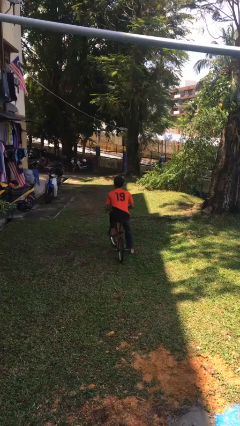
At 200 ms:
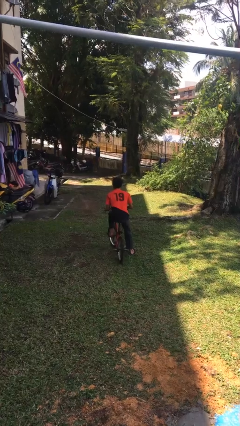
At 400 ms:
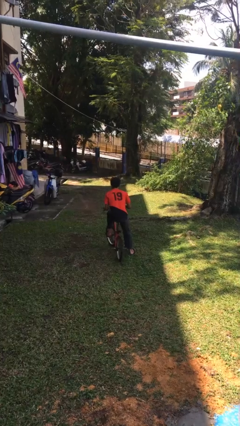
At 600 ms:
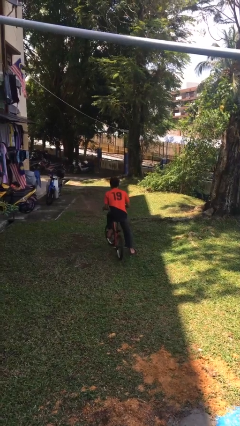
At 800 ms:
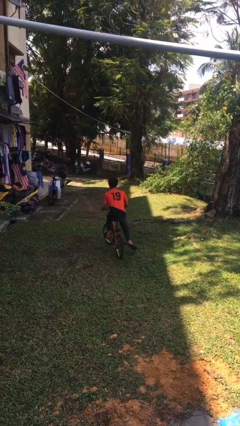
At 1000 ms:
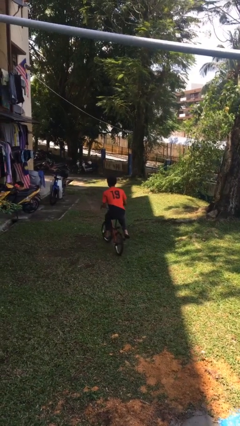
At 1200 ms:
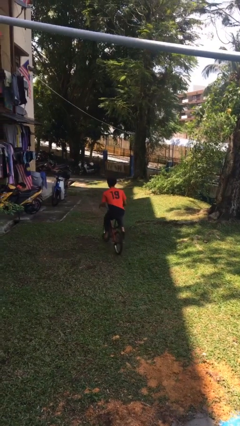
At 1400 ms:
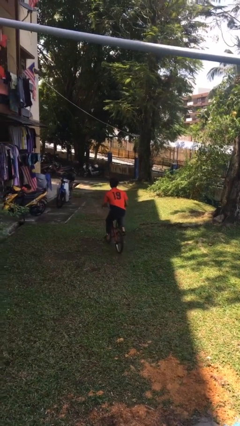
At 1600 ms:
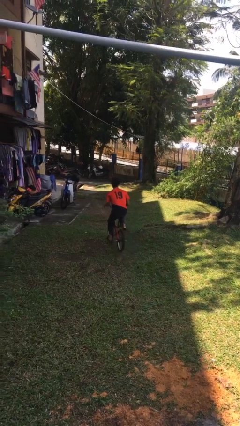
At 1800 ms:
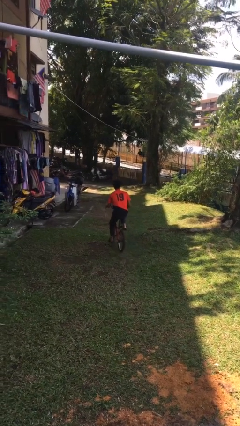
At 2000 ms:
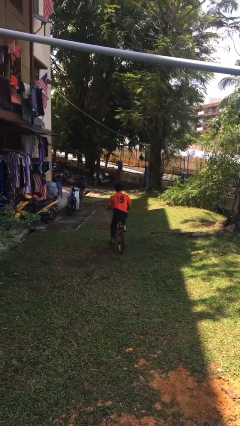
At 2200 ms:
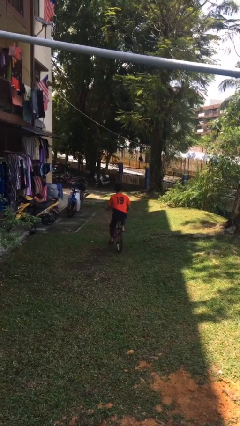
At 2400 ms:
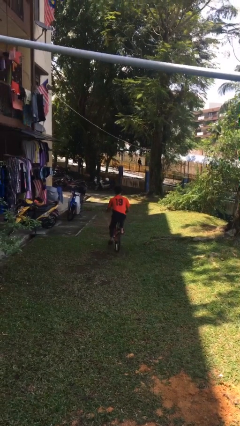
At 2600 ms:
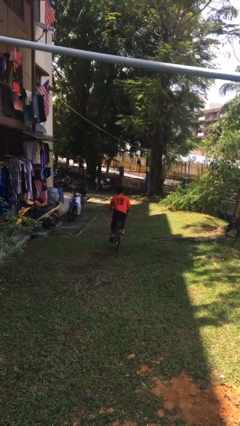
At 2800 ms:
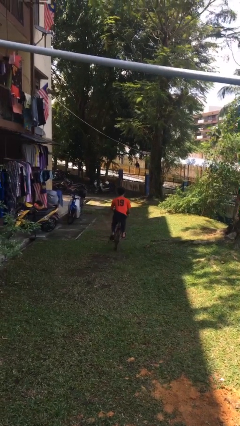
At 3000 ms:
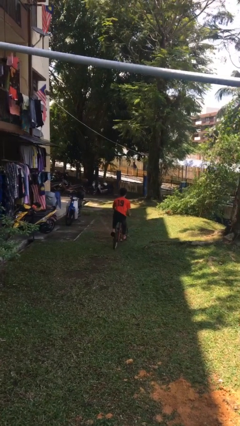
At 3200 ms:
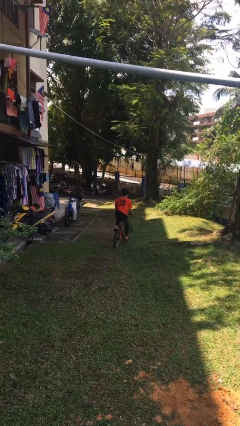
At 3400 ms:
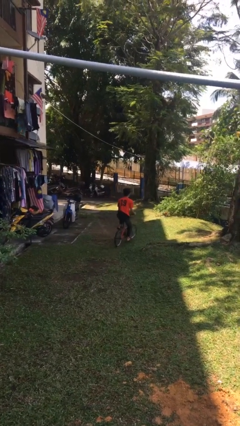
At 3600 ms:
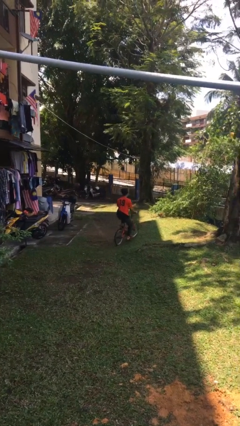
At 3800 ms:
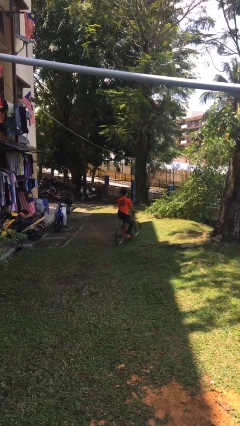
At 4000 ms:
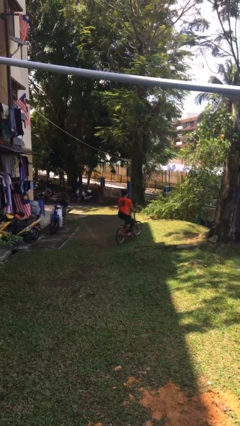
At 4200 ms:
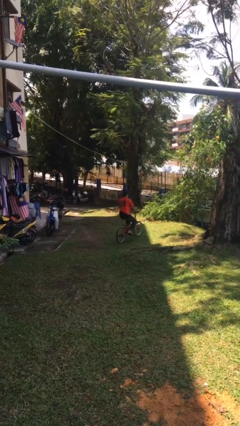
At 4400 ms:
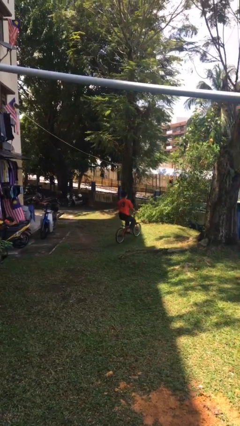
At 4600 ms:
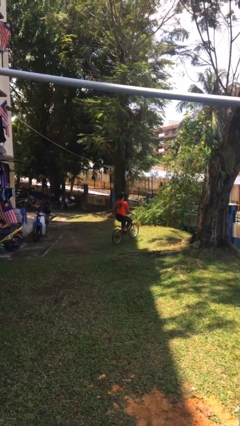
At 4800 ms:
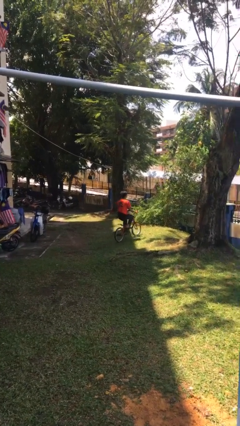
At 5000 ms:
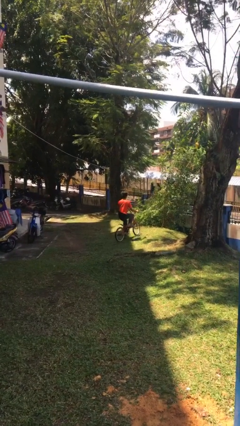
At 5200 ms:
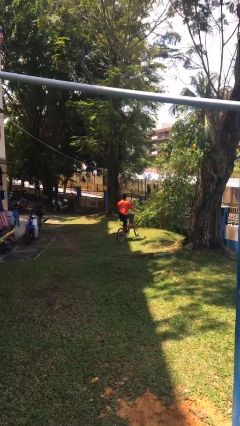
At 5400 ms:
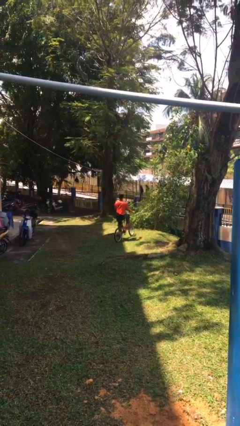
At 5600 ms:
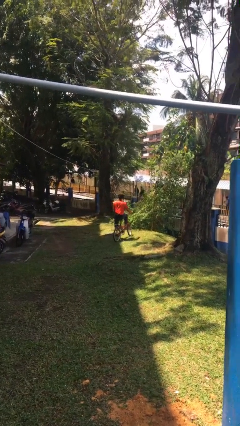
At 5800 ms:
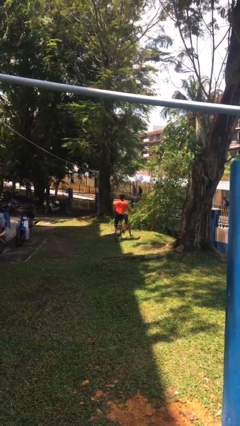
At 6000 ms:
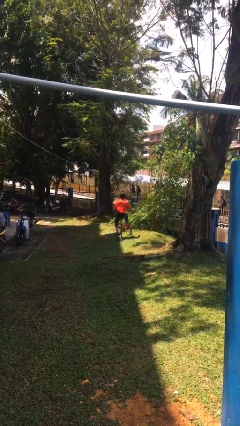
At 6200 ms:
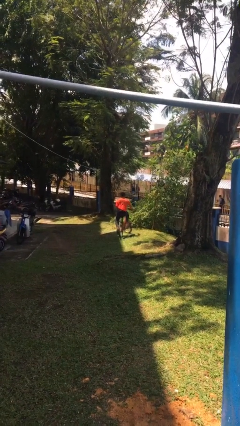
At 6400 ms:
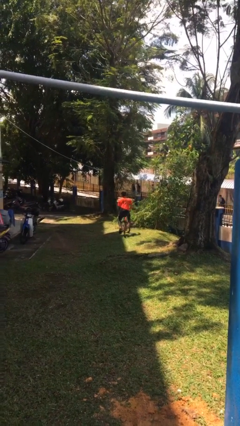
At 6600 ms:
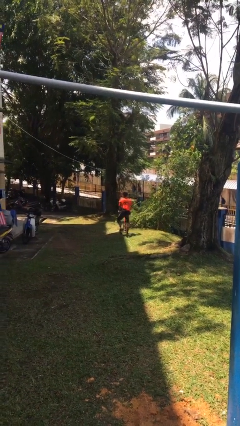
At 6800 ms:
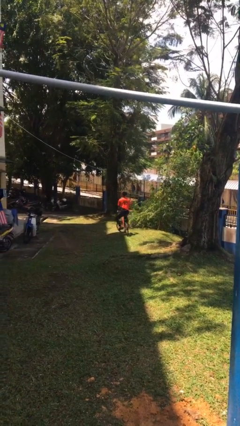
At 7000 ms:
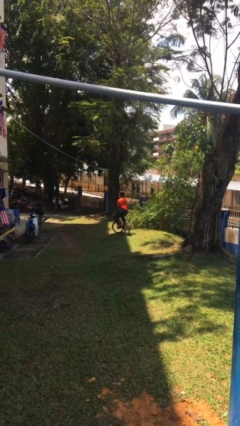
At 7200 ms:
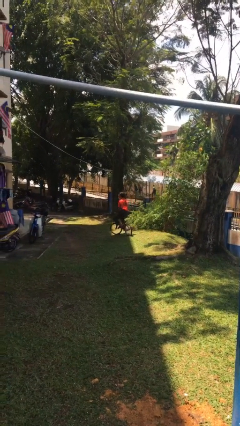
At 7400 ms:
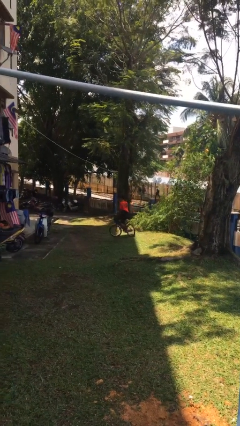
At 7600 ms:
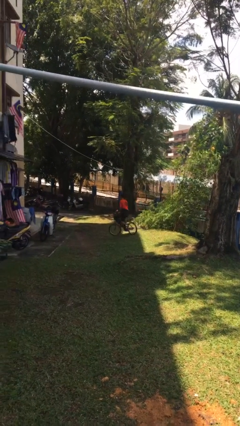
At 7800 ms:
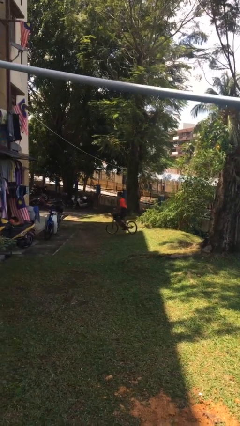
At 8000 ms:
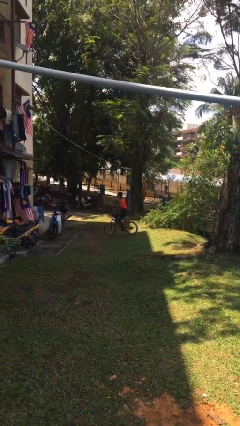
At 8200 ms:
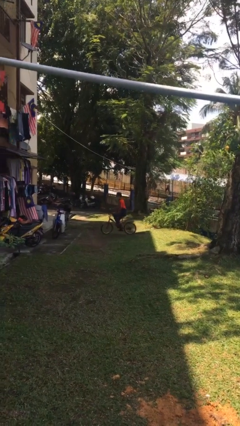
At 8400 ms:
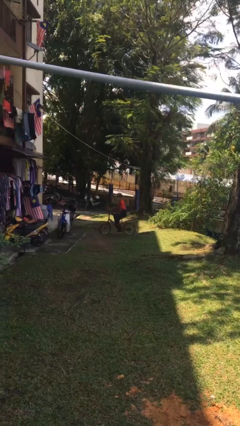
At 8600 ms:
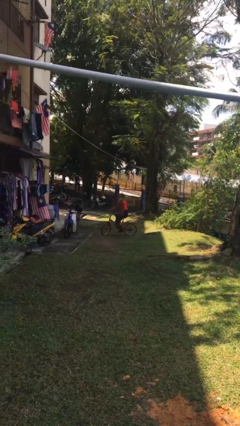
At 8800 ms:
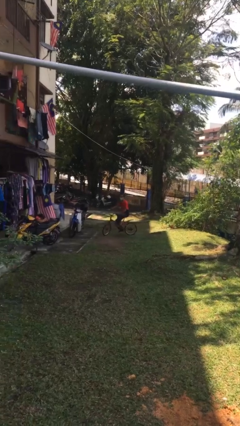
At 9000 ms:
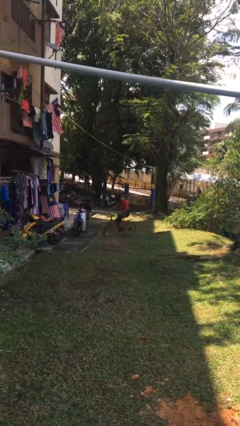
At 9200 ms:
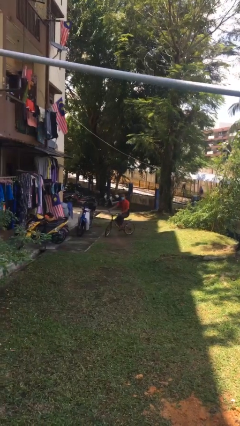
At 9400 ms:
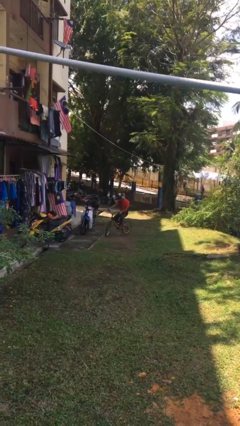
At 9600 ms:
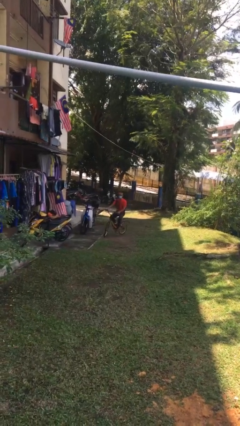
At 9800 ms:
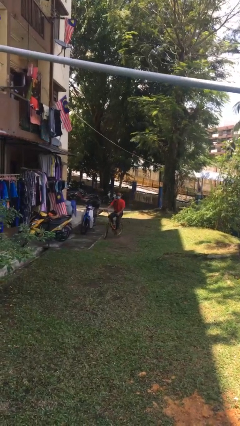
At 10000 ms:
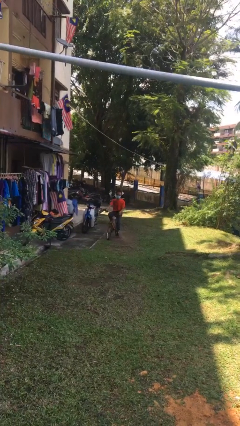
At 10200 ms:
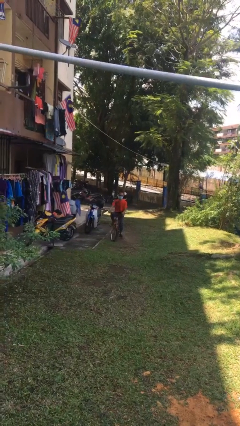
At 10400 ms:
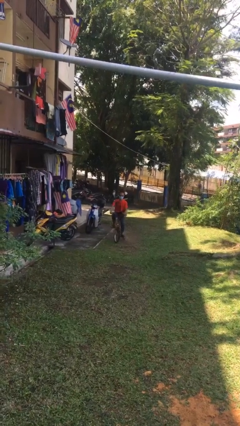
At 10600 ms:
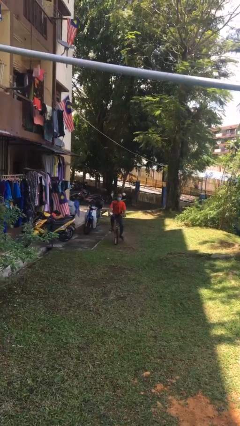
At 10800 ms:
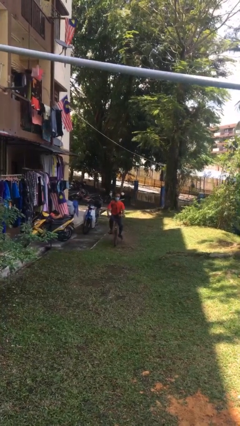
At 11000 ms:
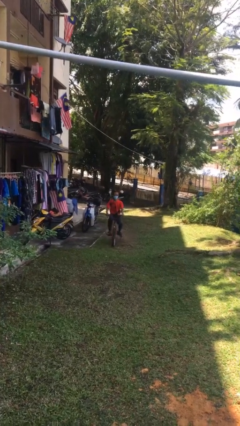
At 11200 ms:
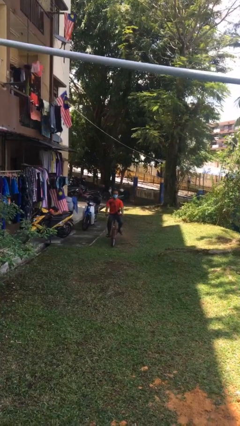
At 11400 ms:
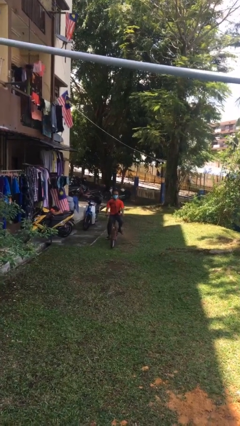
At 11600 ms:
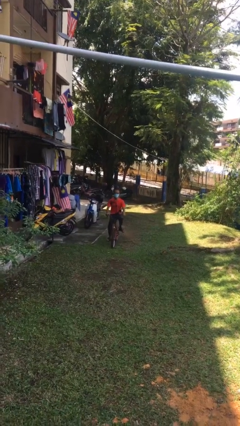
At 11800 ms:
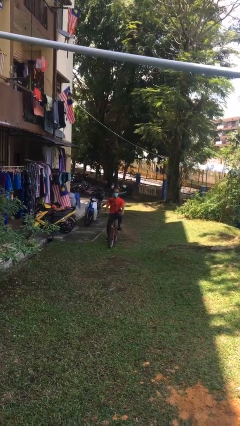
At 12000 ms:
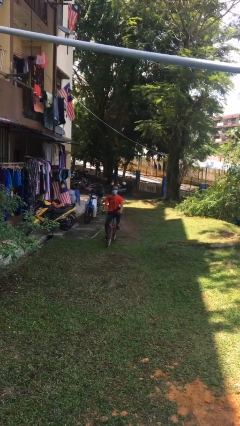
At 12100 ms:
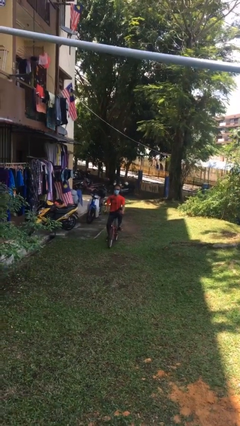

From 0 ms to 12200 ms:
person rides bicycle

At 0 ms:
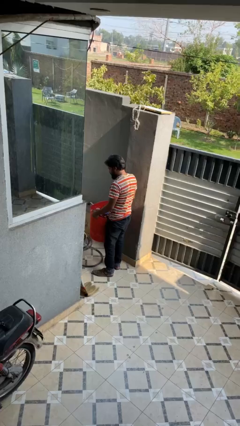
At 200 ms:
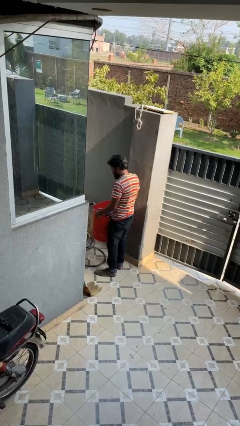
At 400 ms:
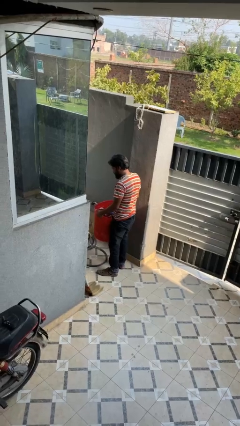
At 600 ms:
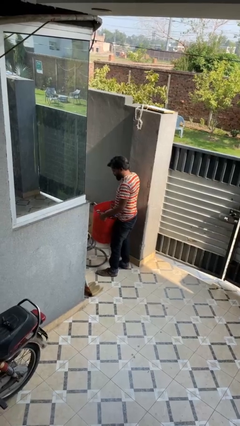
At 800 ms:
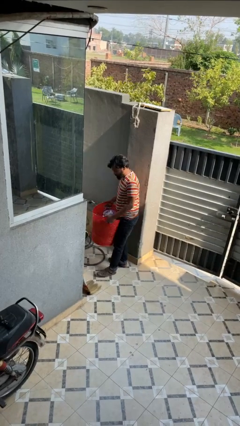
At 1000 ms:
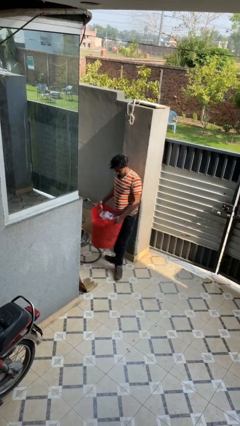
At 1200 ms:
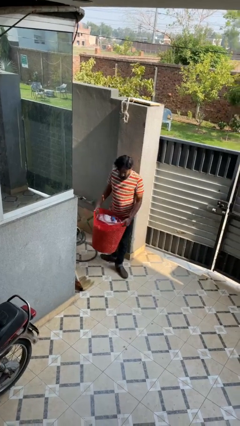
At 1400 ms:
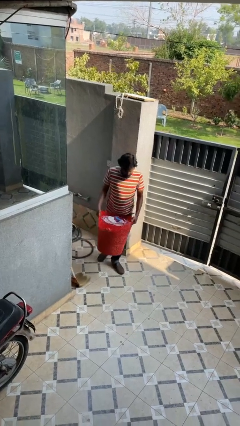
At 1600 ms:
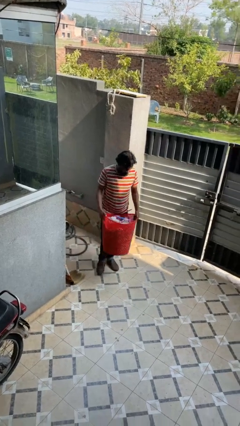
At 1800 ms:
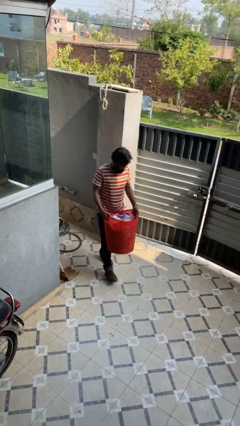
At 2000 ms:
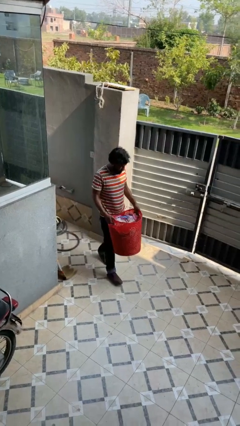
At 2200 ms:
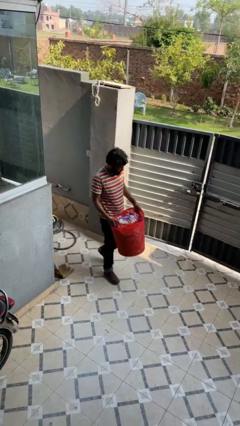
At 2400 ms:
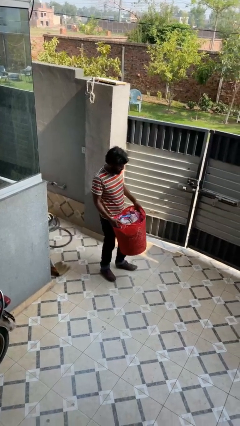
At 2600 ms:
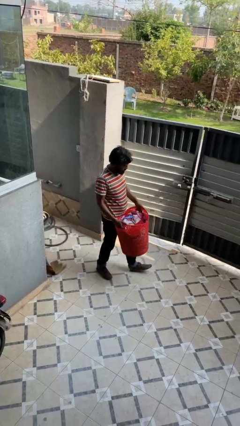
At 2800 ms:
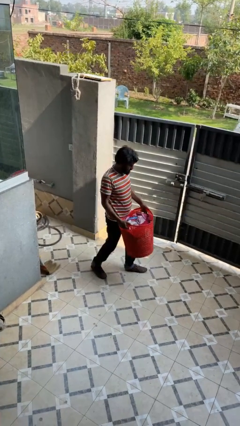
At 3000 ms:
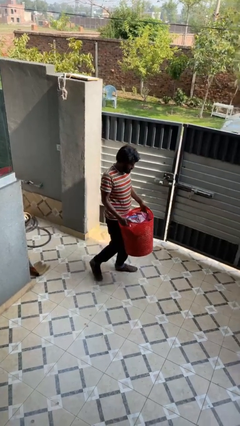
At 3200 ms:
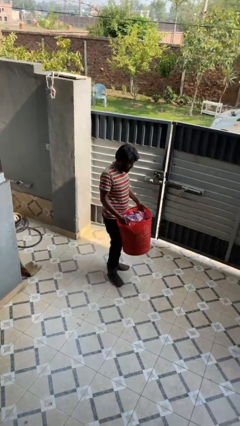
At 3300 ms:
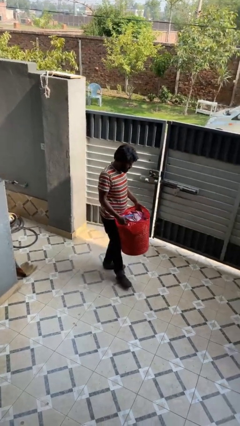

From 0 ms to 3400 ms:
person carries laundry basket

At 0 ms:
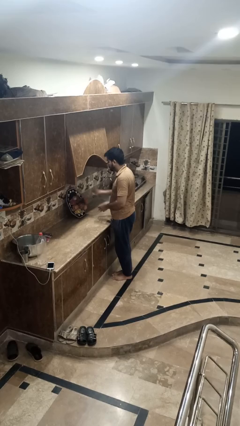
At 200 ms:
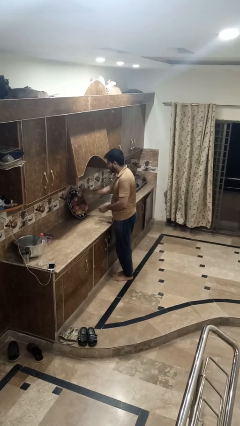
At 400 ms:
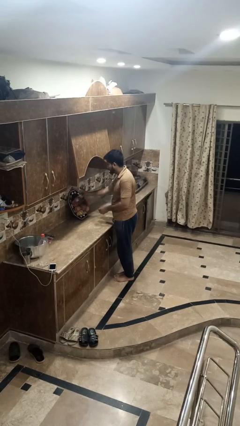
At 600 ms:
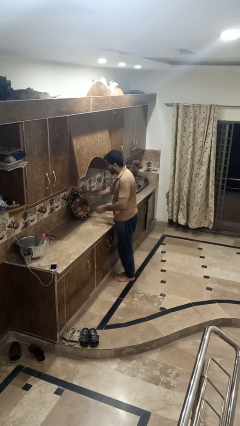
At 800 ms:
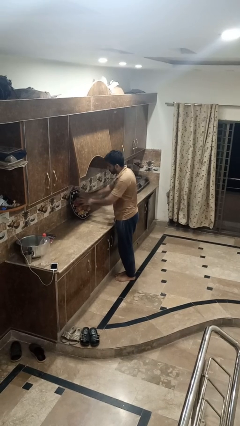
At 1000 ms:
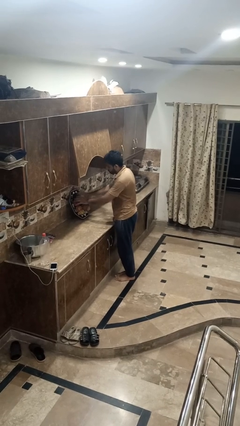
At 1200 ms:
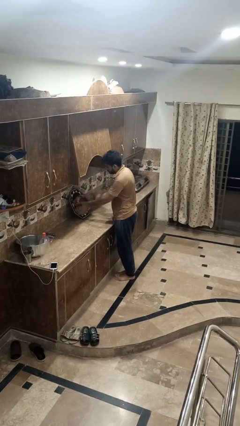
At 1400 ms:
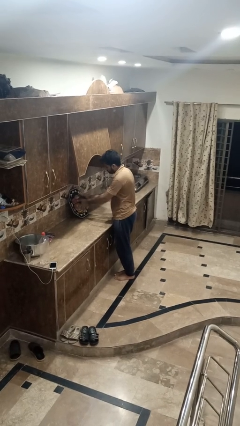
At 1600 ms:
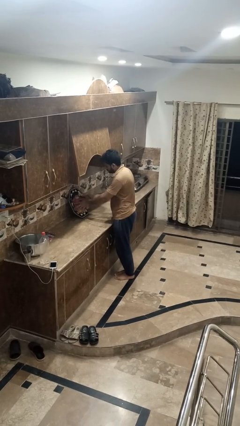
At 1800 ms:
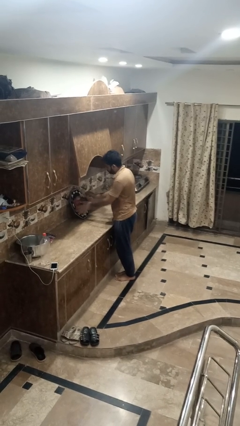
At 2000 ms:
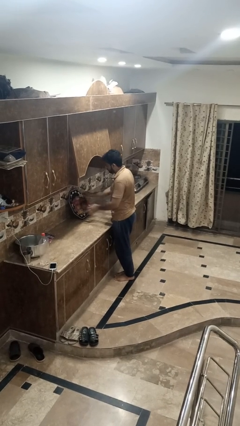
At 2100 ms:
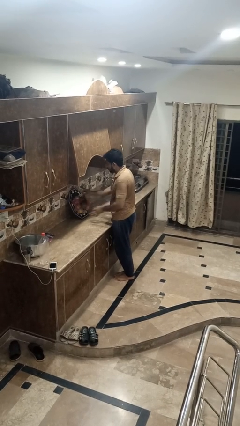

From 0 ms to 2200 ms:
person arranges flowers in vase
